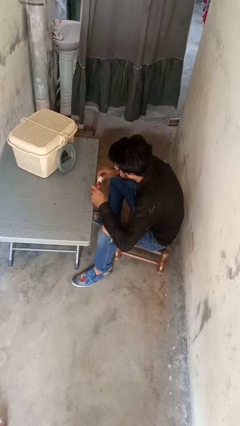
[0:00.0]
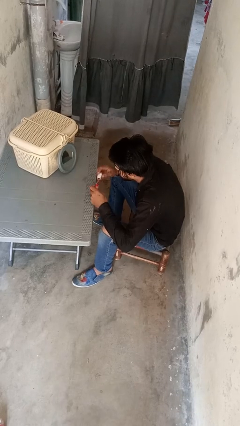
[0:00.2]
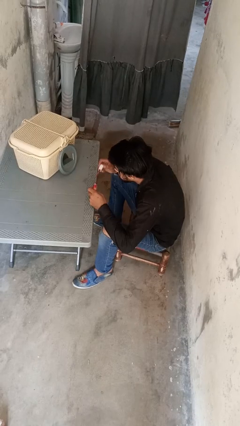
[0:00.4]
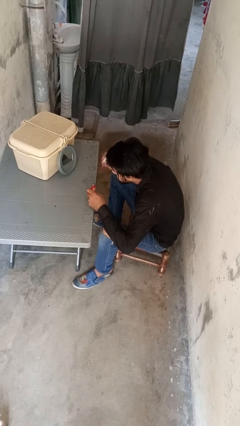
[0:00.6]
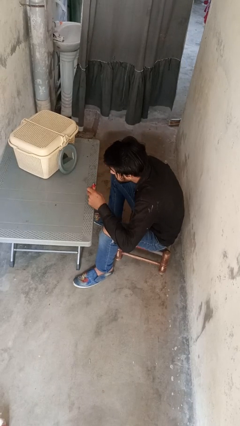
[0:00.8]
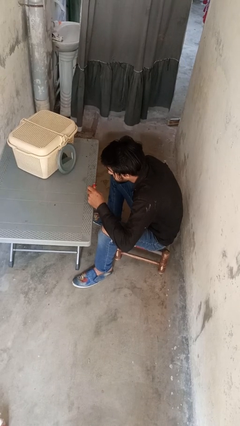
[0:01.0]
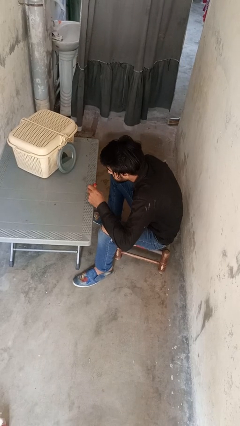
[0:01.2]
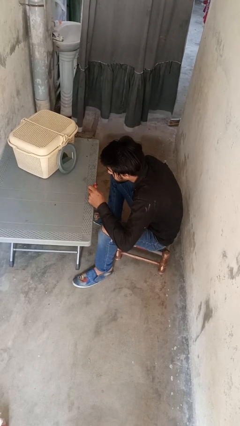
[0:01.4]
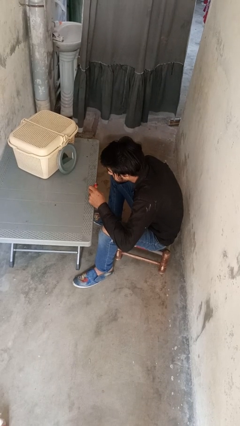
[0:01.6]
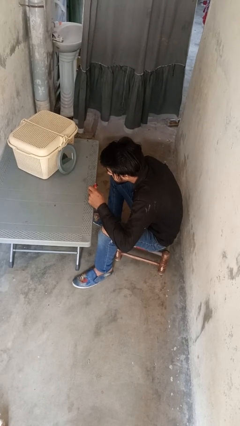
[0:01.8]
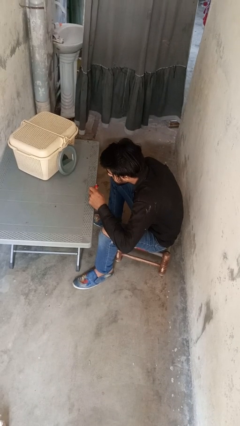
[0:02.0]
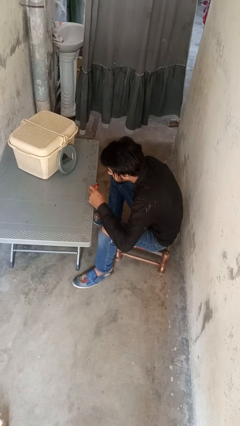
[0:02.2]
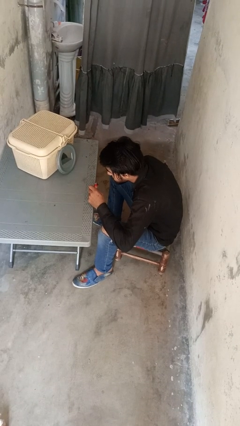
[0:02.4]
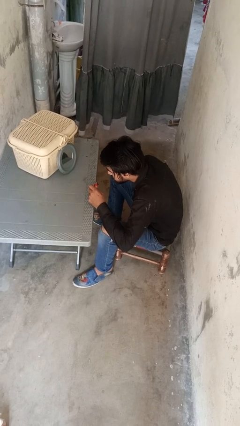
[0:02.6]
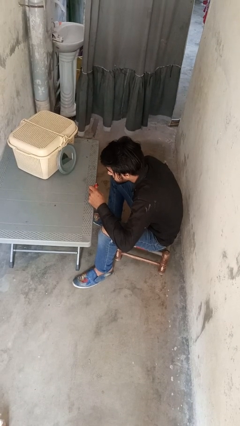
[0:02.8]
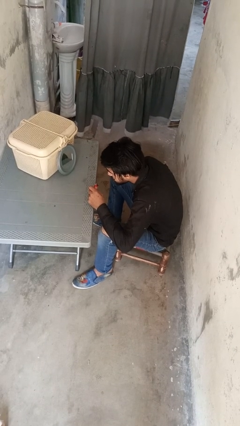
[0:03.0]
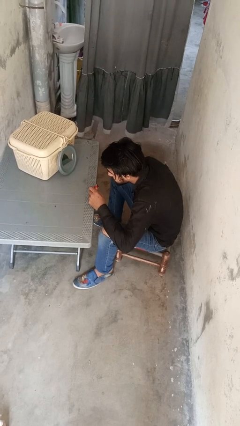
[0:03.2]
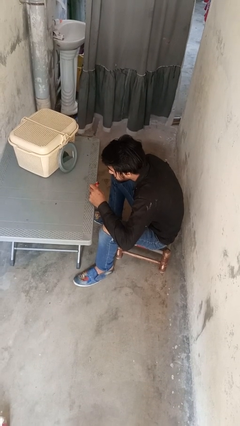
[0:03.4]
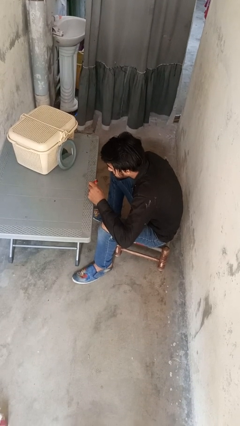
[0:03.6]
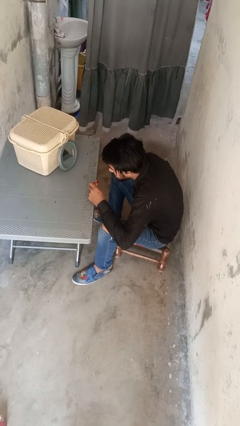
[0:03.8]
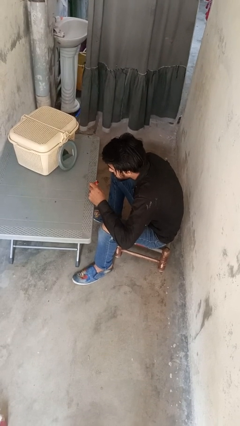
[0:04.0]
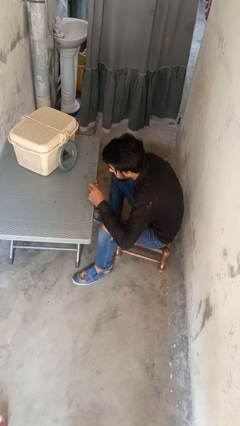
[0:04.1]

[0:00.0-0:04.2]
person applies eye makeup

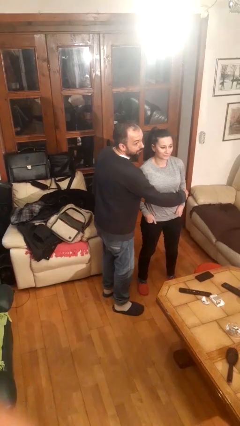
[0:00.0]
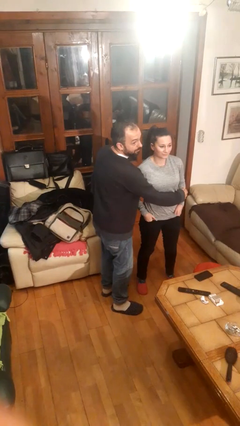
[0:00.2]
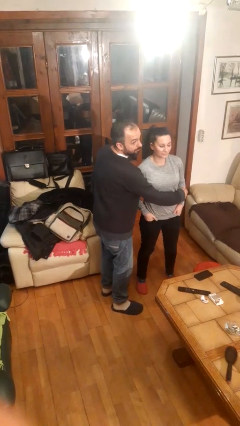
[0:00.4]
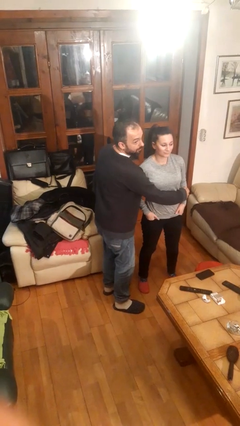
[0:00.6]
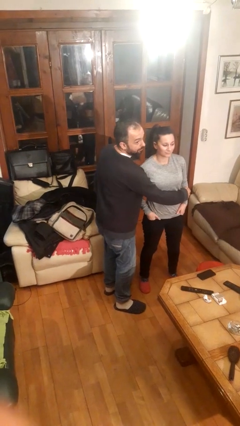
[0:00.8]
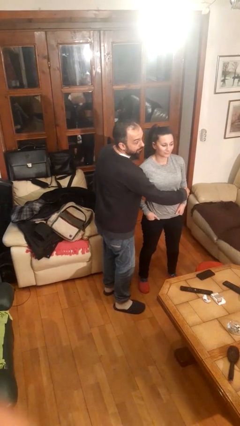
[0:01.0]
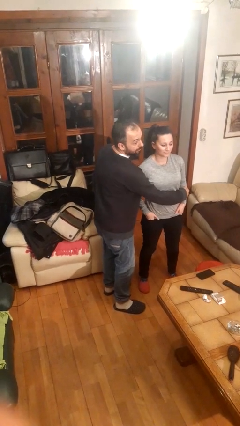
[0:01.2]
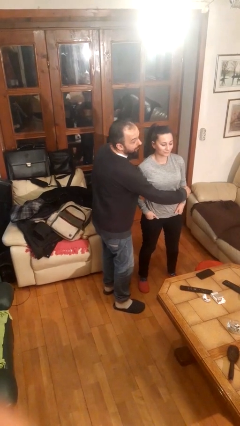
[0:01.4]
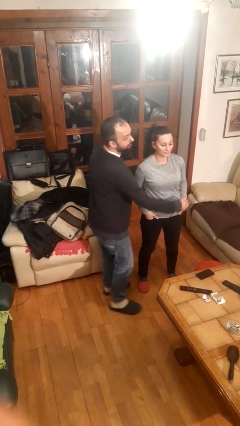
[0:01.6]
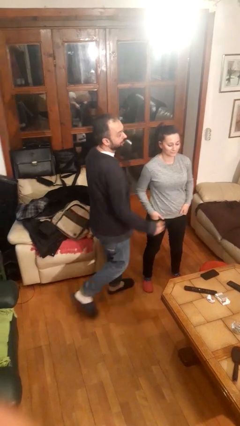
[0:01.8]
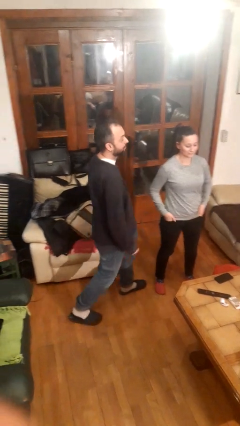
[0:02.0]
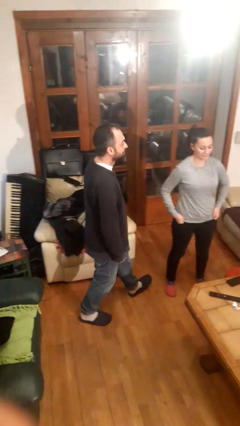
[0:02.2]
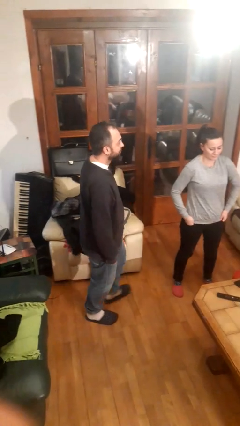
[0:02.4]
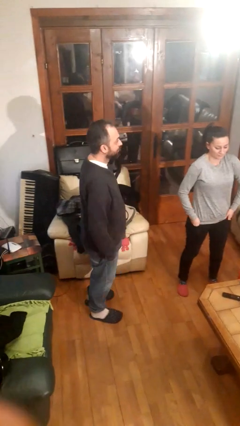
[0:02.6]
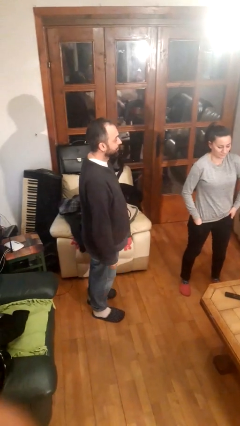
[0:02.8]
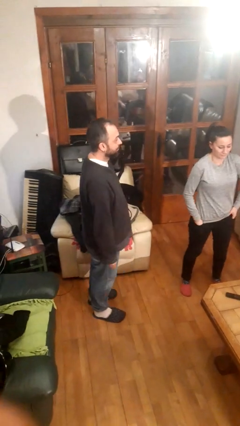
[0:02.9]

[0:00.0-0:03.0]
person hugs person from side

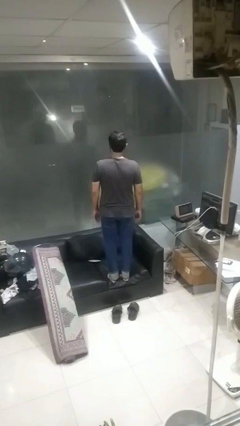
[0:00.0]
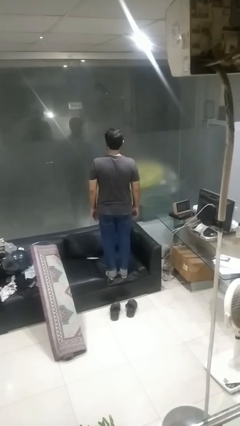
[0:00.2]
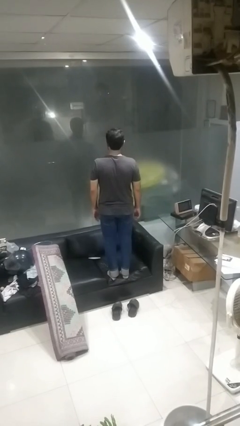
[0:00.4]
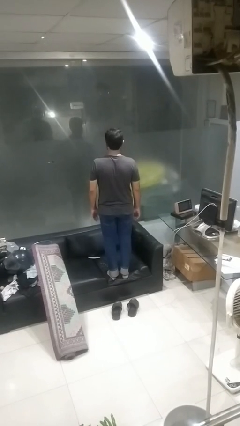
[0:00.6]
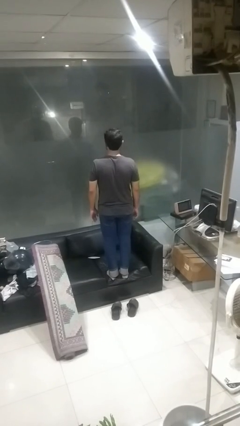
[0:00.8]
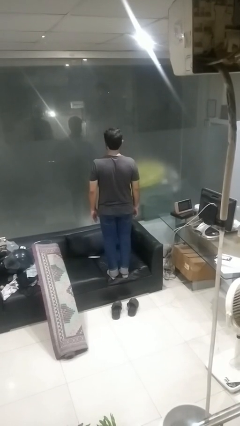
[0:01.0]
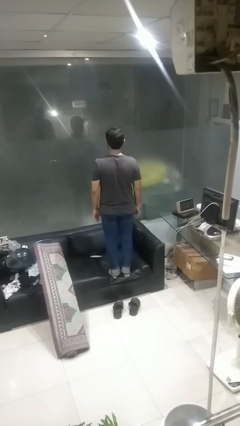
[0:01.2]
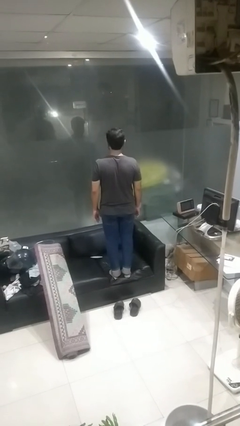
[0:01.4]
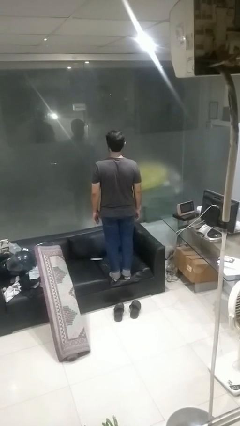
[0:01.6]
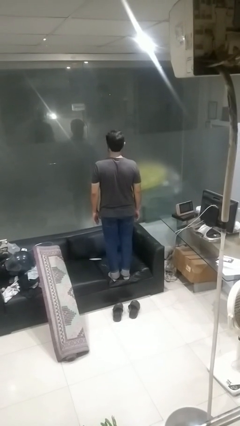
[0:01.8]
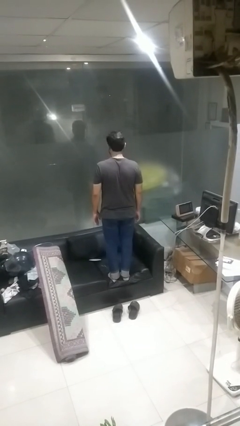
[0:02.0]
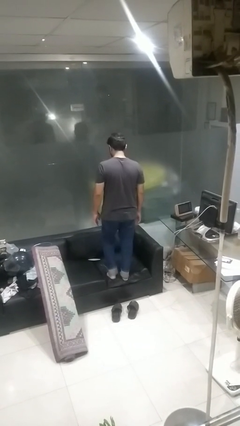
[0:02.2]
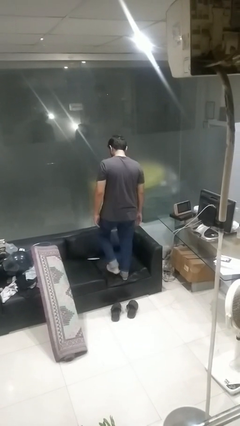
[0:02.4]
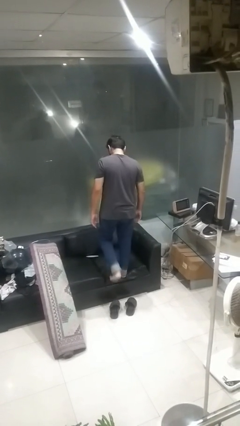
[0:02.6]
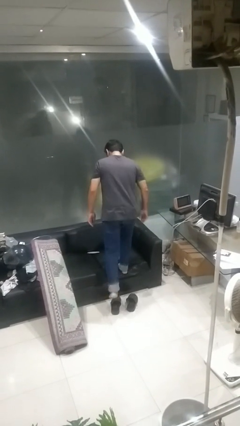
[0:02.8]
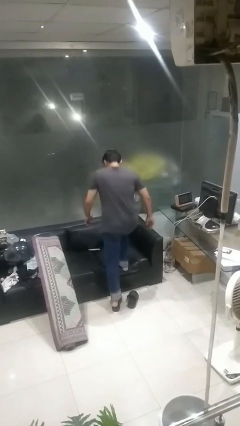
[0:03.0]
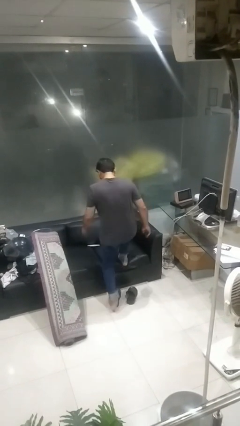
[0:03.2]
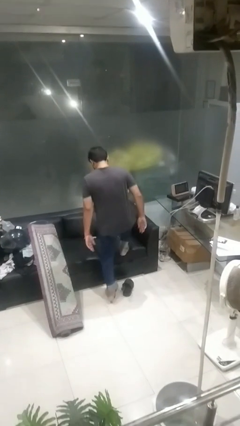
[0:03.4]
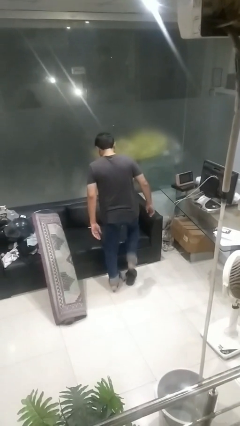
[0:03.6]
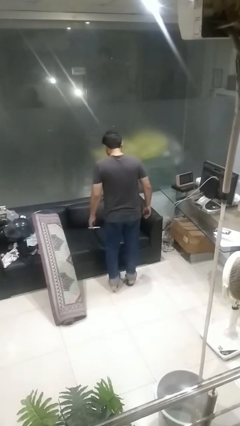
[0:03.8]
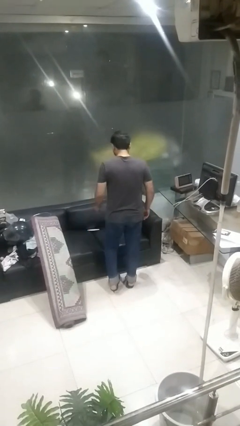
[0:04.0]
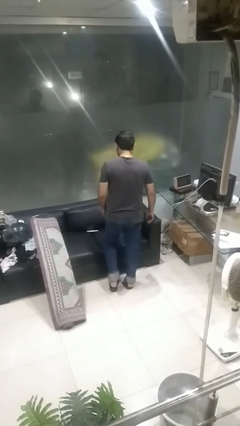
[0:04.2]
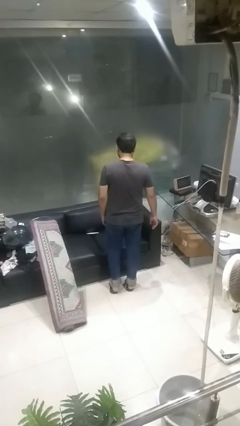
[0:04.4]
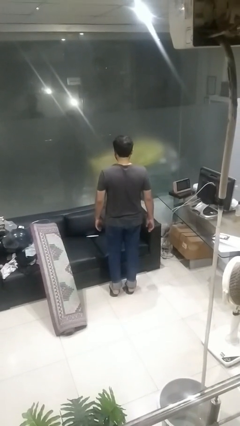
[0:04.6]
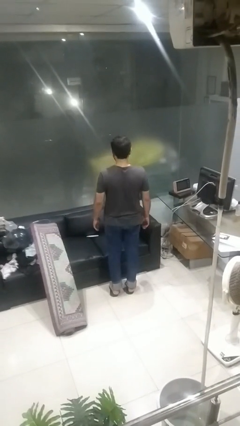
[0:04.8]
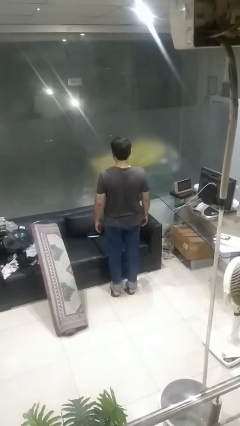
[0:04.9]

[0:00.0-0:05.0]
person climbs off couch

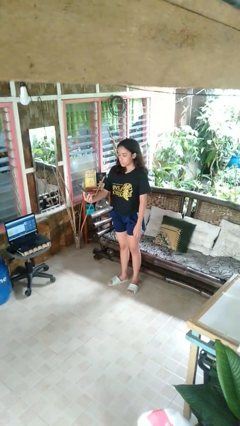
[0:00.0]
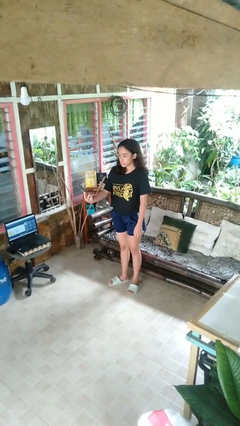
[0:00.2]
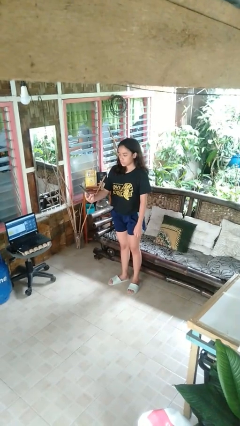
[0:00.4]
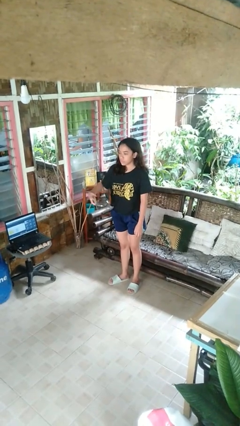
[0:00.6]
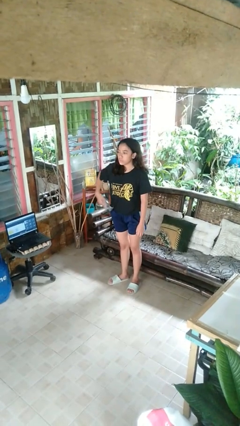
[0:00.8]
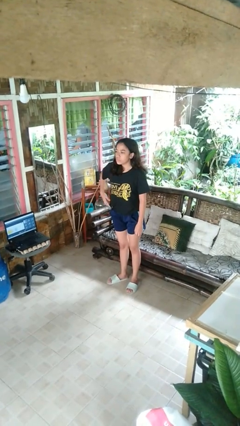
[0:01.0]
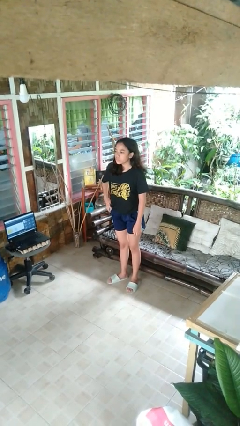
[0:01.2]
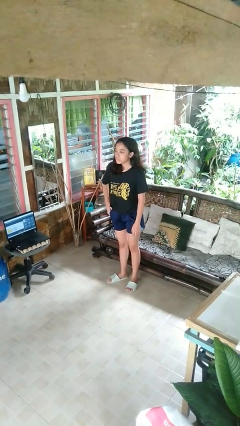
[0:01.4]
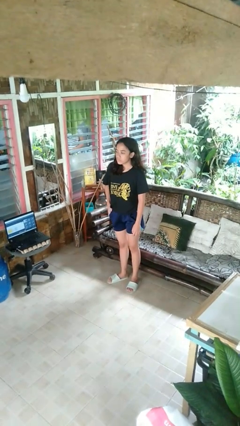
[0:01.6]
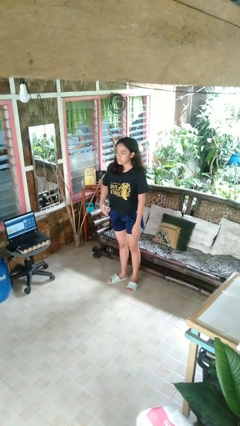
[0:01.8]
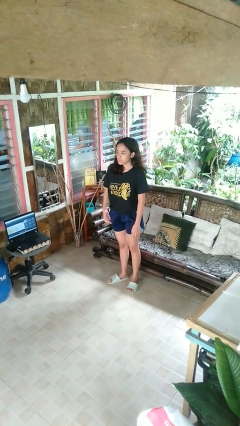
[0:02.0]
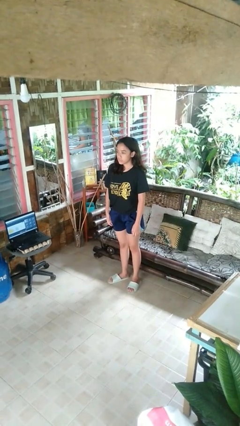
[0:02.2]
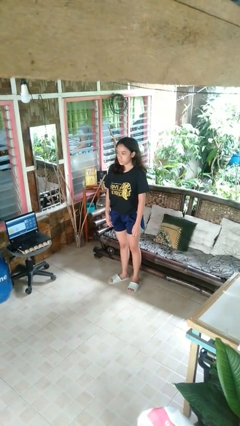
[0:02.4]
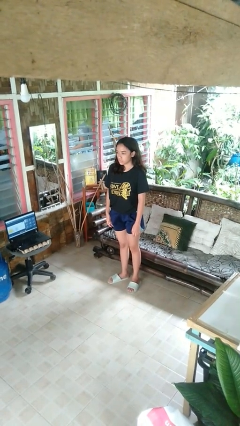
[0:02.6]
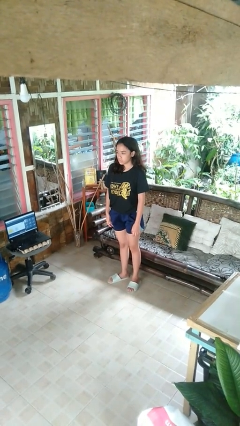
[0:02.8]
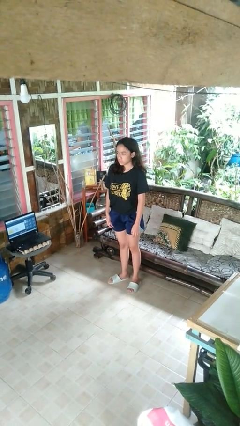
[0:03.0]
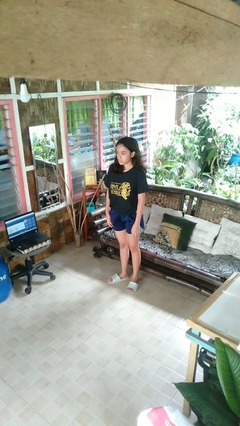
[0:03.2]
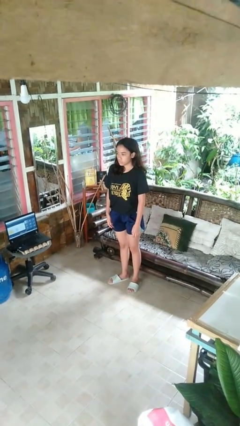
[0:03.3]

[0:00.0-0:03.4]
person puts phone into pocket

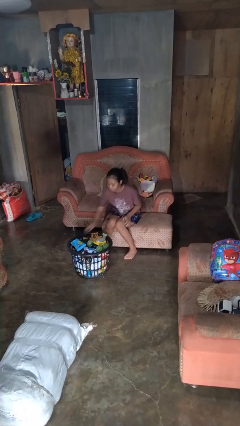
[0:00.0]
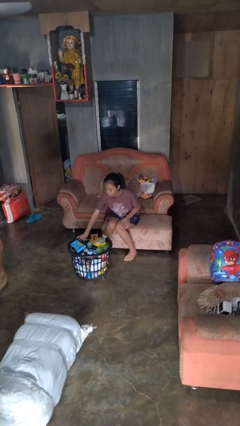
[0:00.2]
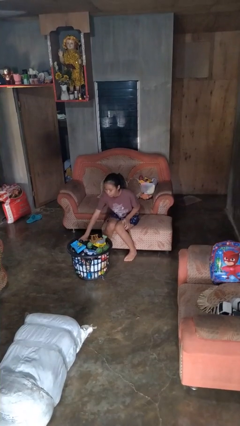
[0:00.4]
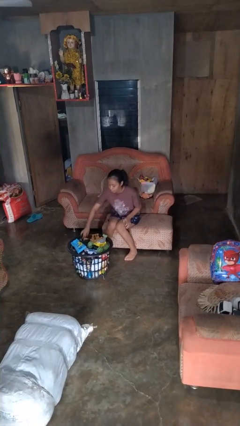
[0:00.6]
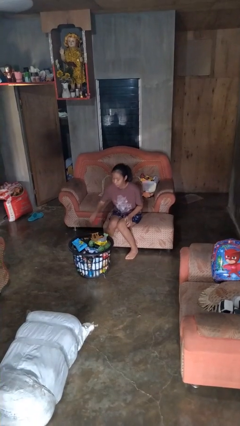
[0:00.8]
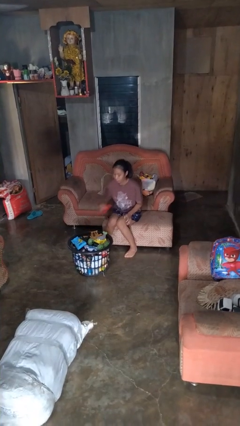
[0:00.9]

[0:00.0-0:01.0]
person takes object from basket

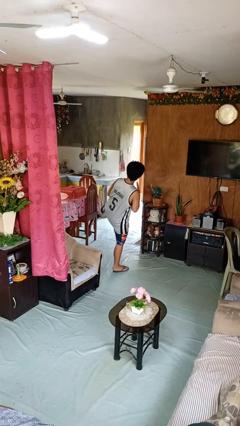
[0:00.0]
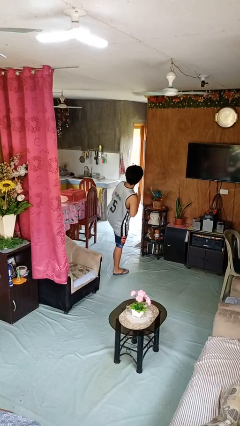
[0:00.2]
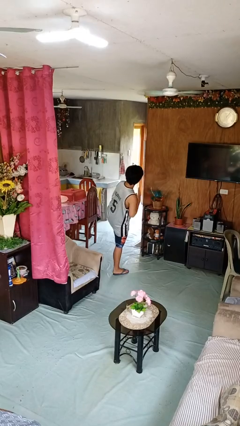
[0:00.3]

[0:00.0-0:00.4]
person karate kicks

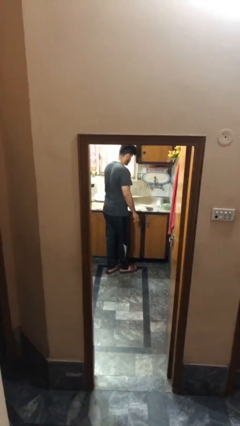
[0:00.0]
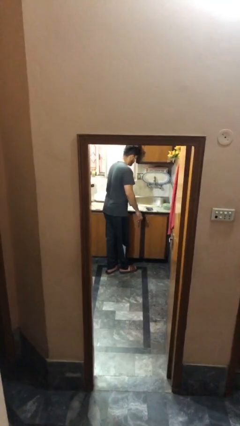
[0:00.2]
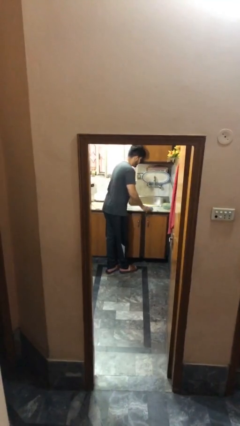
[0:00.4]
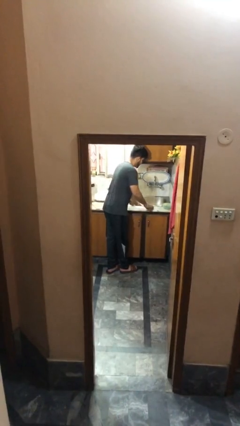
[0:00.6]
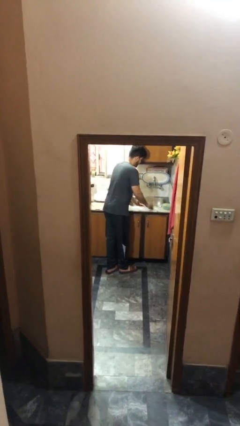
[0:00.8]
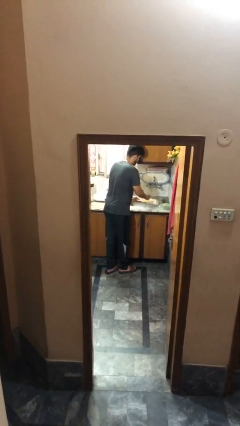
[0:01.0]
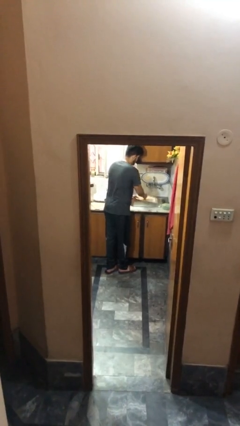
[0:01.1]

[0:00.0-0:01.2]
person washes dish
